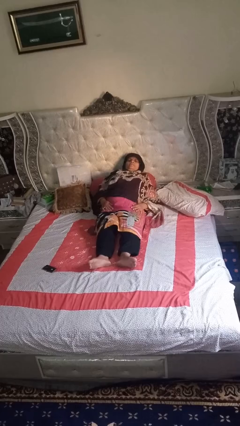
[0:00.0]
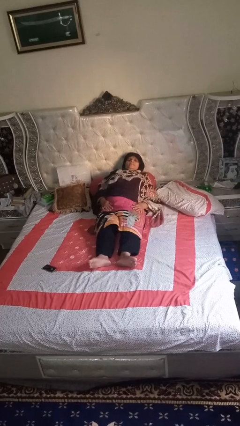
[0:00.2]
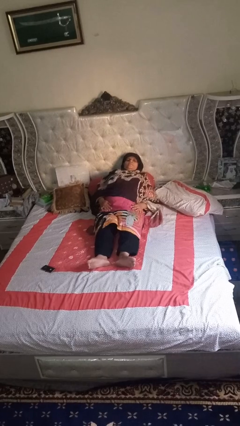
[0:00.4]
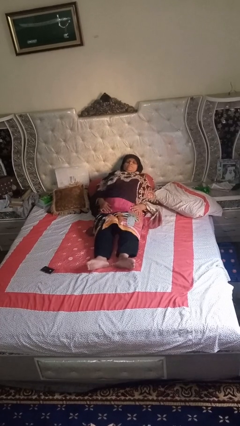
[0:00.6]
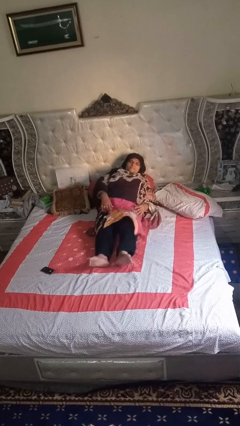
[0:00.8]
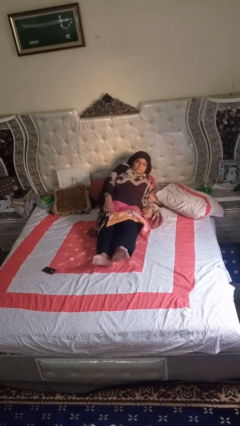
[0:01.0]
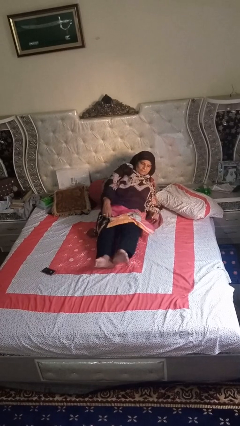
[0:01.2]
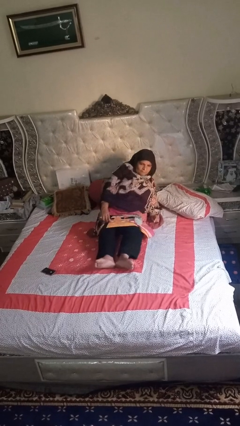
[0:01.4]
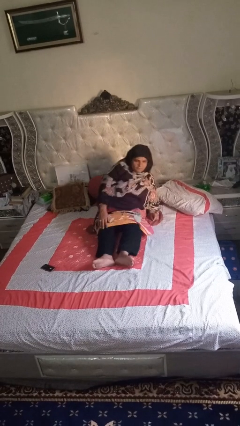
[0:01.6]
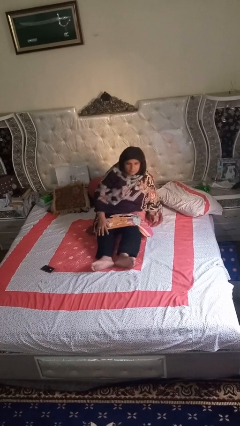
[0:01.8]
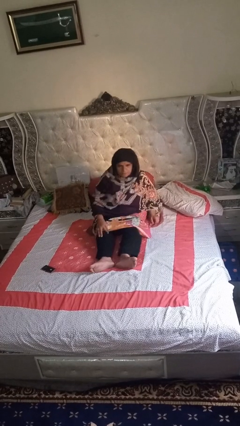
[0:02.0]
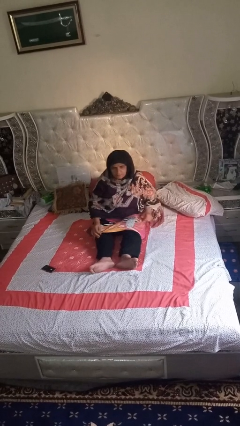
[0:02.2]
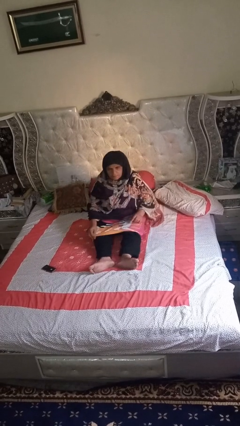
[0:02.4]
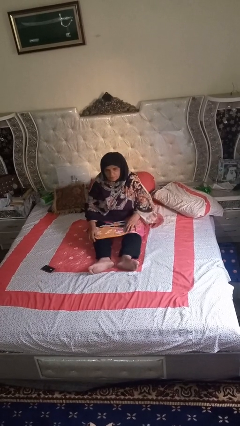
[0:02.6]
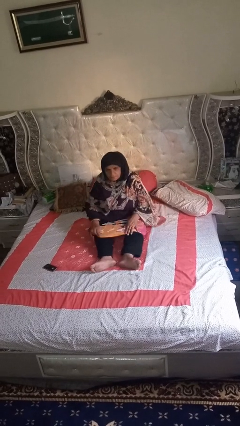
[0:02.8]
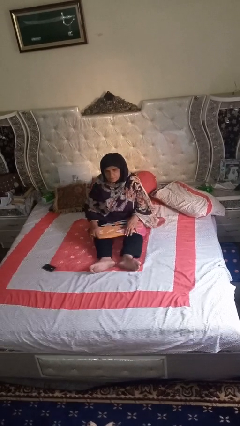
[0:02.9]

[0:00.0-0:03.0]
person stands up

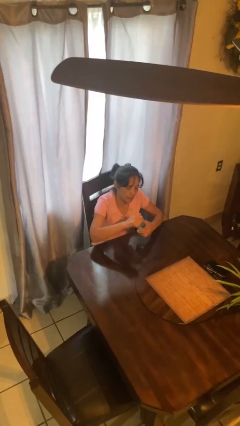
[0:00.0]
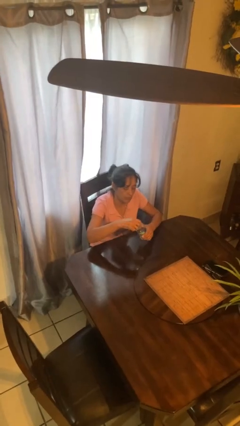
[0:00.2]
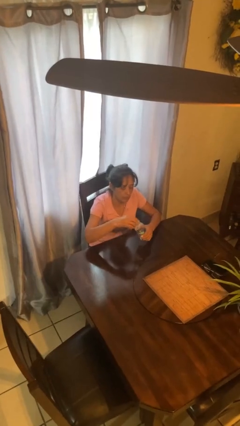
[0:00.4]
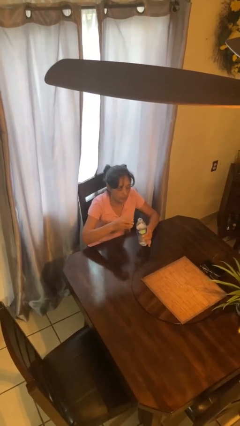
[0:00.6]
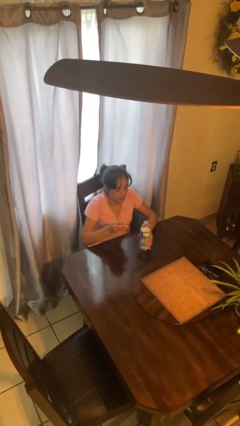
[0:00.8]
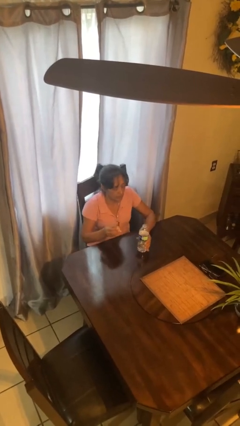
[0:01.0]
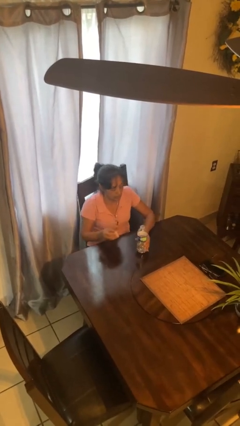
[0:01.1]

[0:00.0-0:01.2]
person unscrews lid from bottle

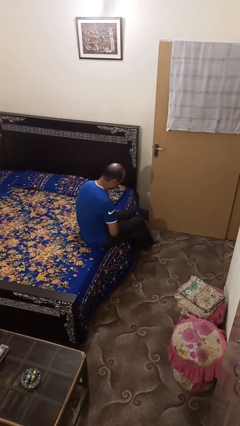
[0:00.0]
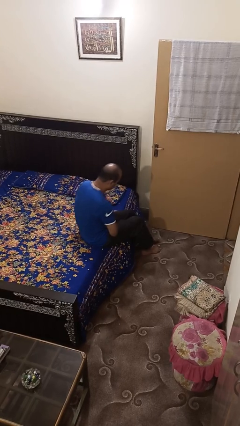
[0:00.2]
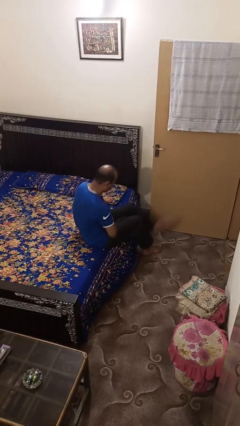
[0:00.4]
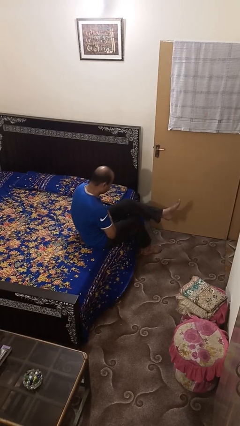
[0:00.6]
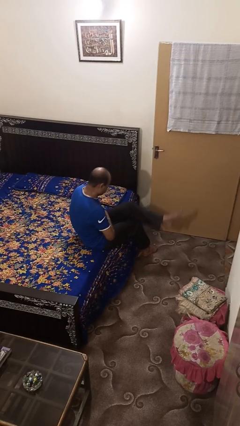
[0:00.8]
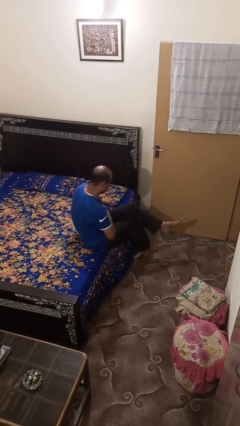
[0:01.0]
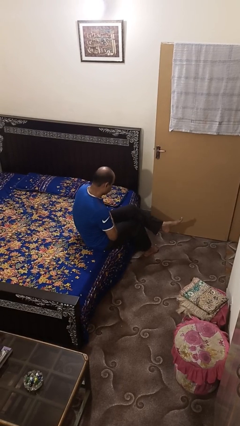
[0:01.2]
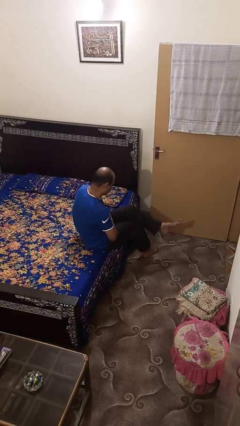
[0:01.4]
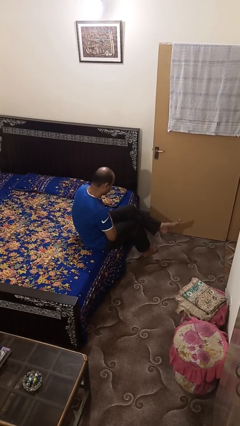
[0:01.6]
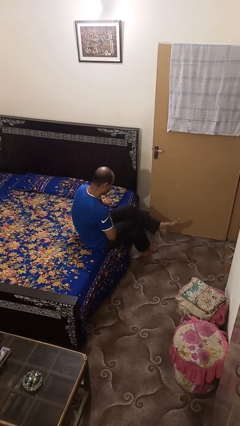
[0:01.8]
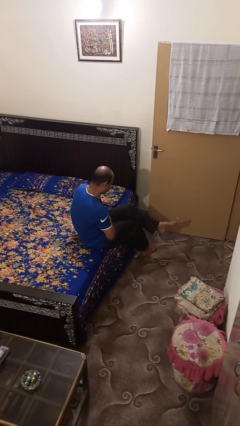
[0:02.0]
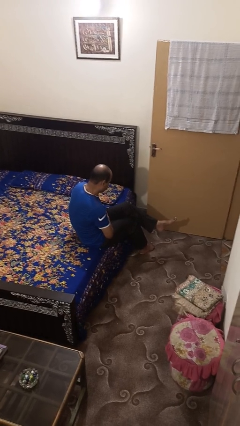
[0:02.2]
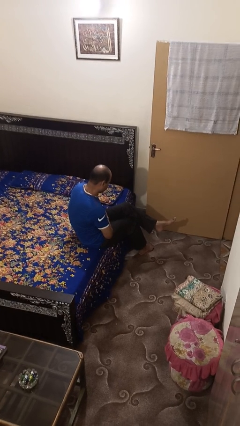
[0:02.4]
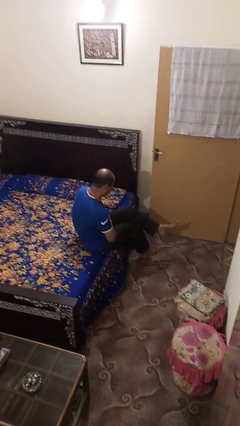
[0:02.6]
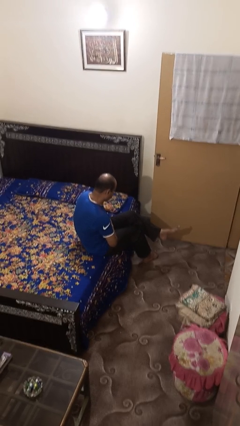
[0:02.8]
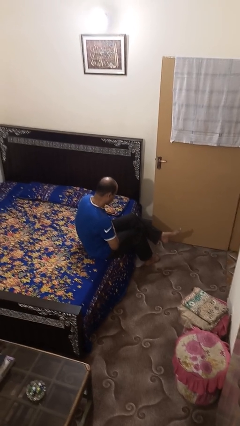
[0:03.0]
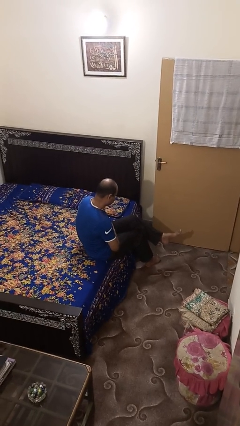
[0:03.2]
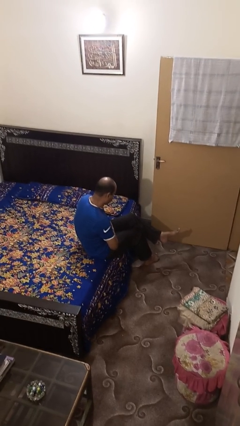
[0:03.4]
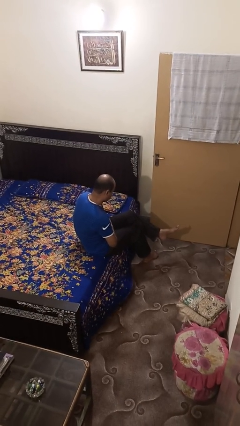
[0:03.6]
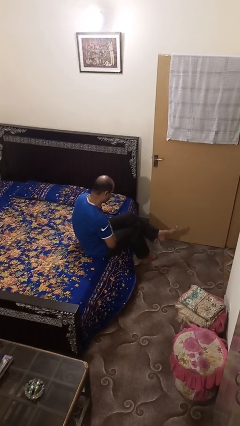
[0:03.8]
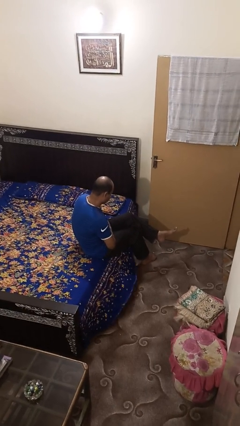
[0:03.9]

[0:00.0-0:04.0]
person crosses legs

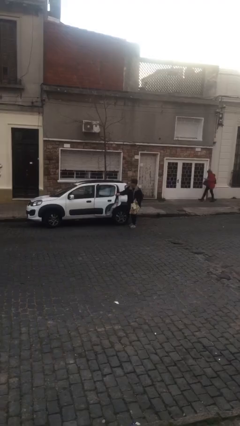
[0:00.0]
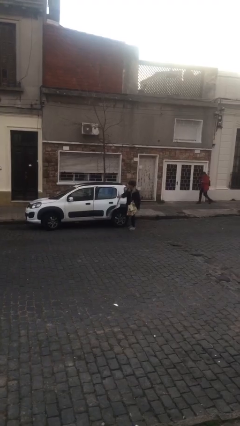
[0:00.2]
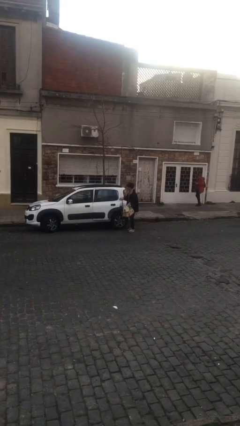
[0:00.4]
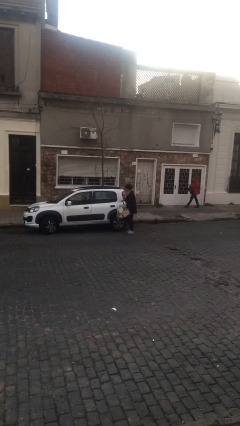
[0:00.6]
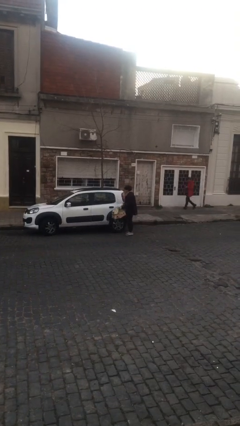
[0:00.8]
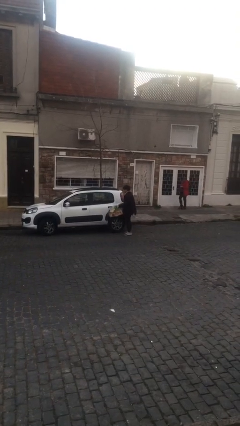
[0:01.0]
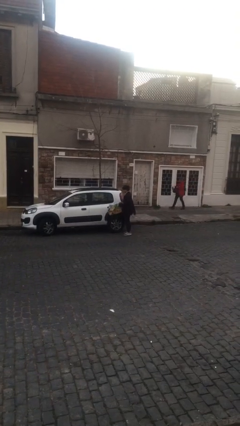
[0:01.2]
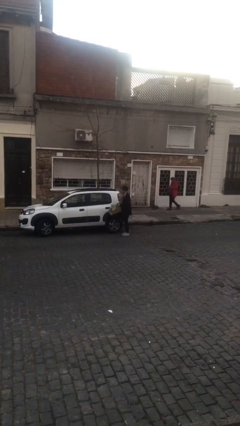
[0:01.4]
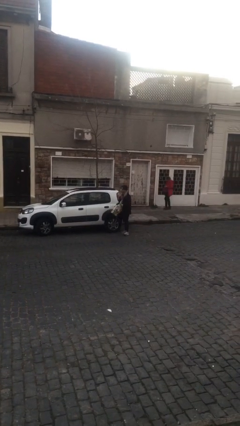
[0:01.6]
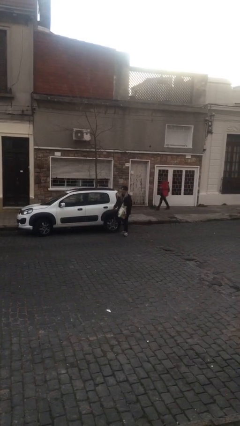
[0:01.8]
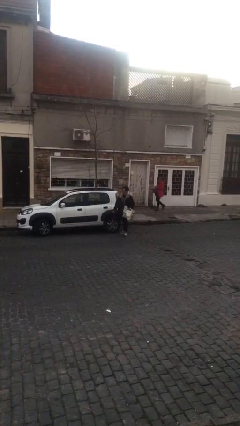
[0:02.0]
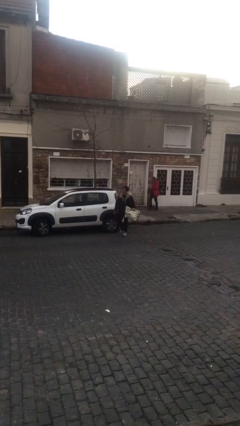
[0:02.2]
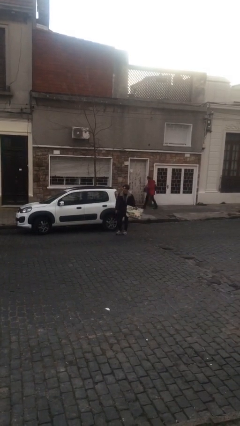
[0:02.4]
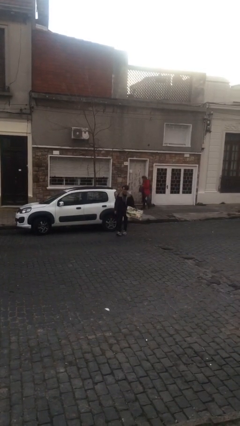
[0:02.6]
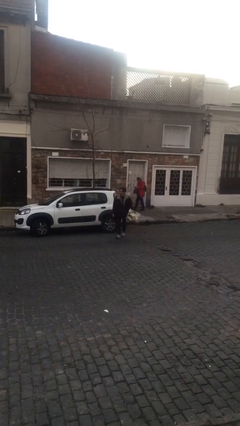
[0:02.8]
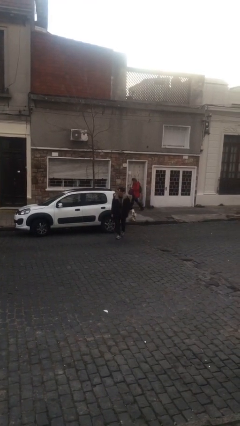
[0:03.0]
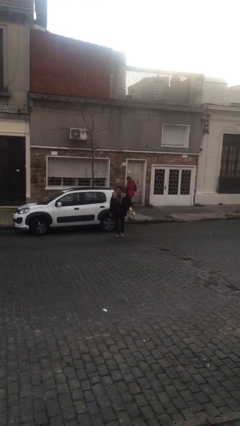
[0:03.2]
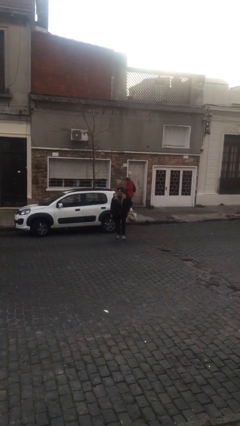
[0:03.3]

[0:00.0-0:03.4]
person closes car door

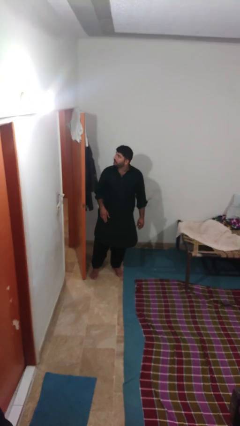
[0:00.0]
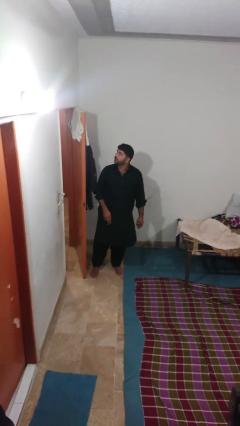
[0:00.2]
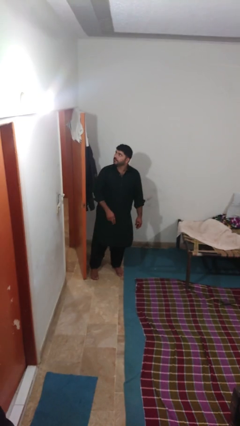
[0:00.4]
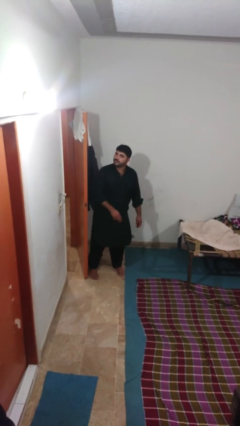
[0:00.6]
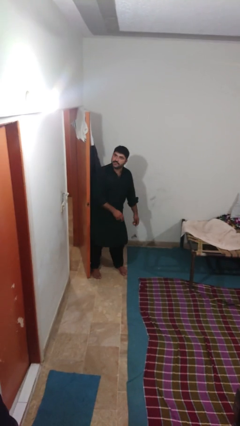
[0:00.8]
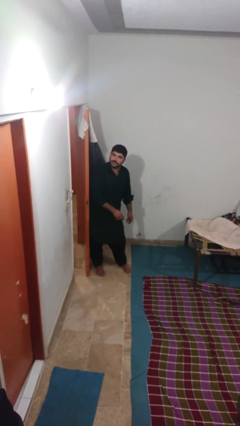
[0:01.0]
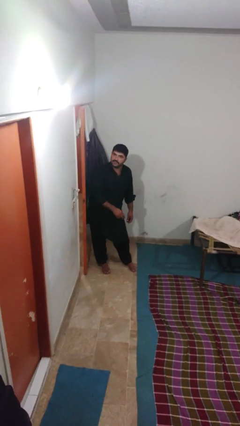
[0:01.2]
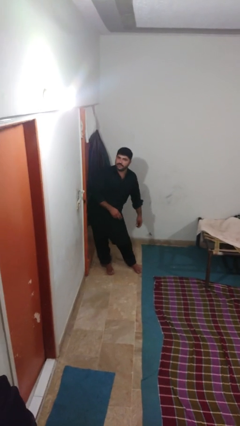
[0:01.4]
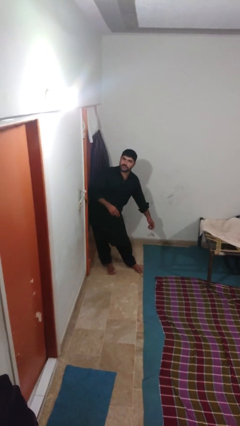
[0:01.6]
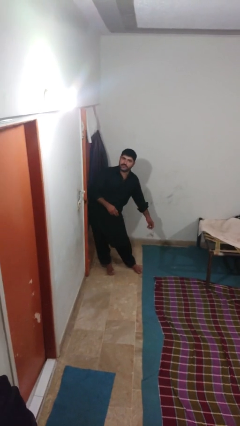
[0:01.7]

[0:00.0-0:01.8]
person closes door with hip

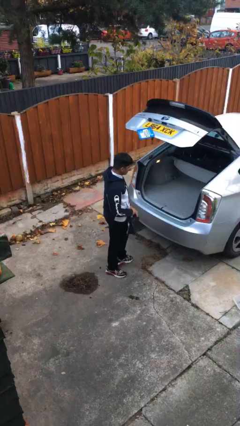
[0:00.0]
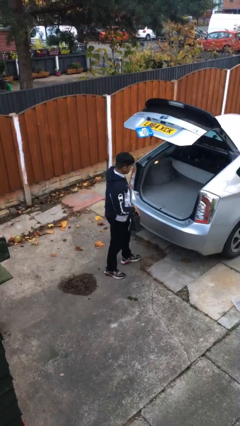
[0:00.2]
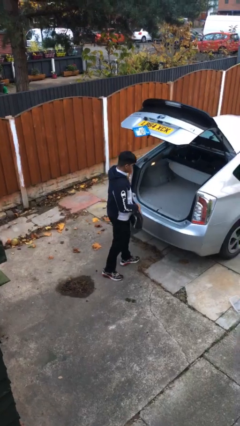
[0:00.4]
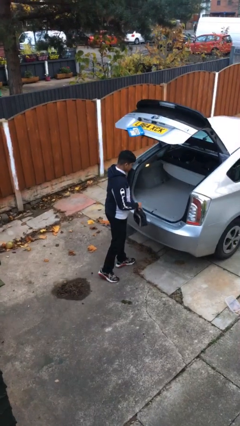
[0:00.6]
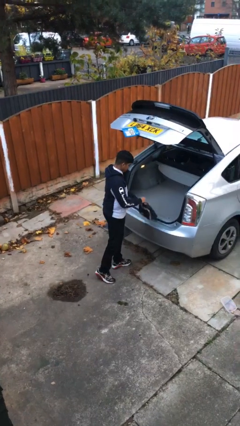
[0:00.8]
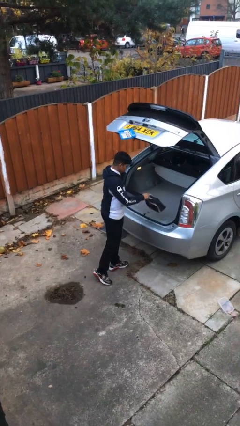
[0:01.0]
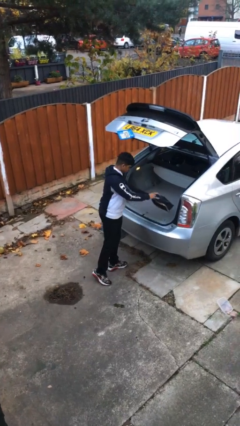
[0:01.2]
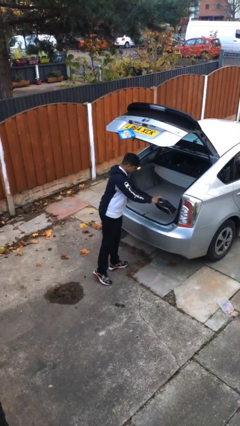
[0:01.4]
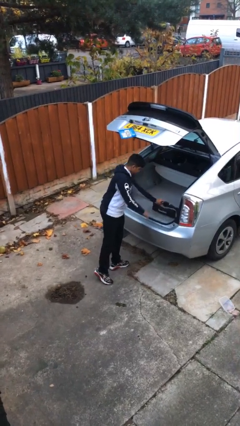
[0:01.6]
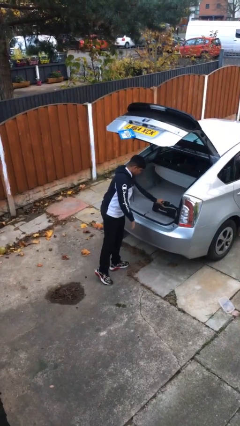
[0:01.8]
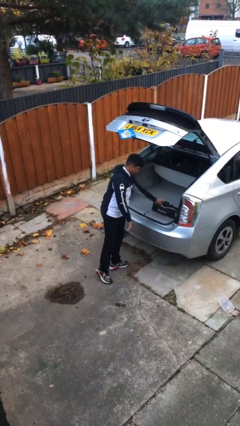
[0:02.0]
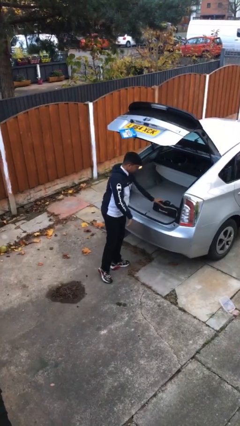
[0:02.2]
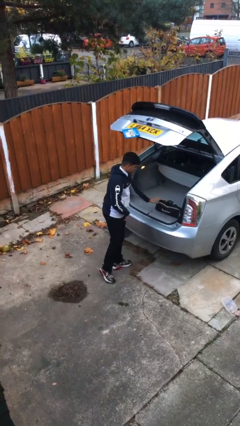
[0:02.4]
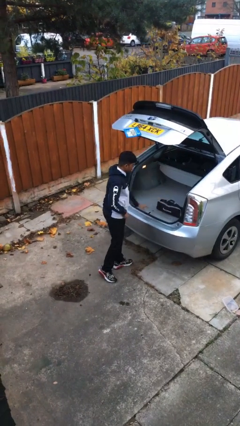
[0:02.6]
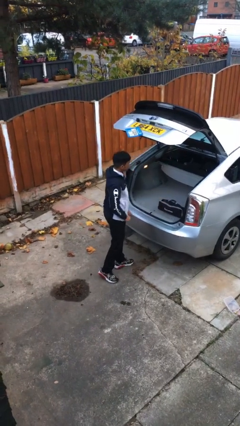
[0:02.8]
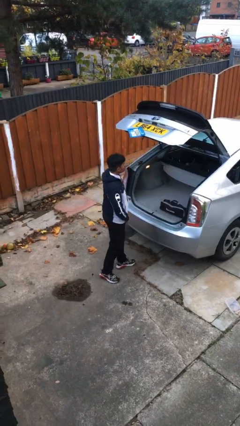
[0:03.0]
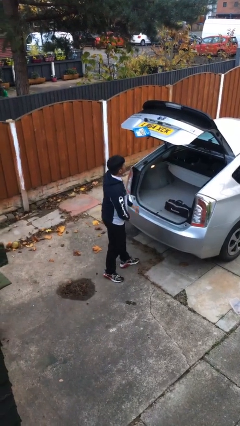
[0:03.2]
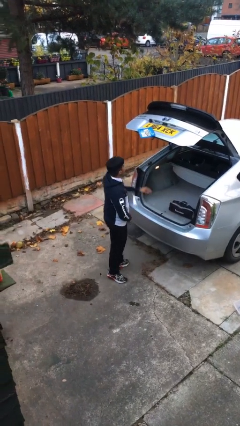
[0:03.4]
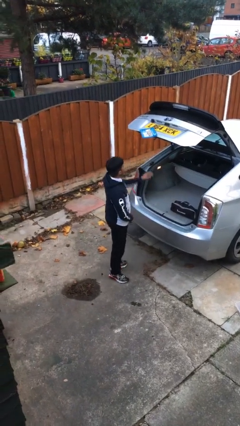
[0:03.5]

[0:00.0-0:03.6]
person loads car

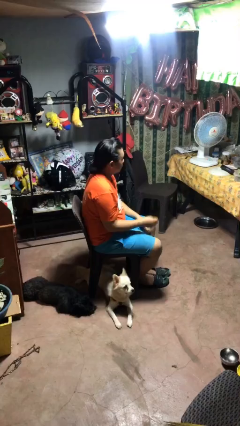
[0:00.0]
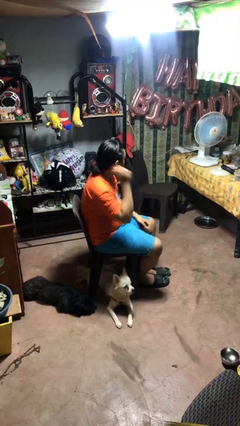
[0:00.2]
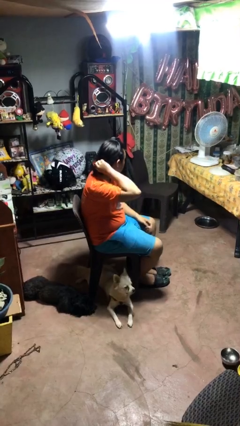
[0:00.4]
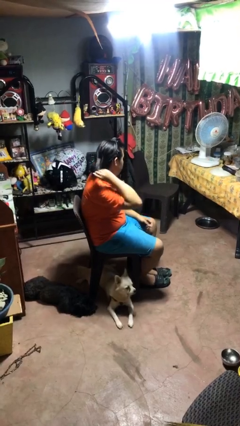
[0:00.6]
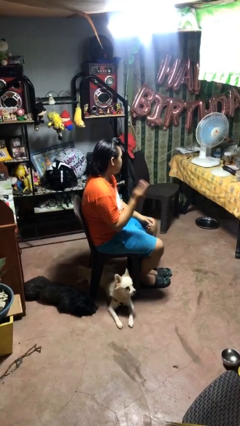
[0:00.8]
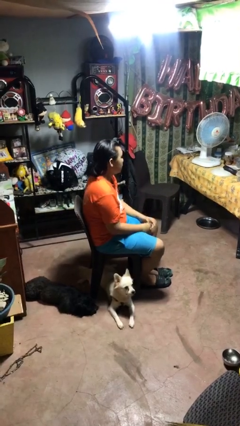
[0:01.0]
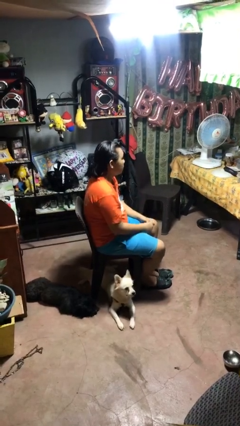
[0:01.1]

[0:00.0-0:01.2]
person takes off hairtie
